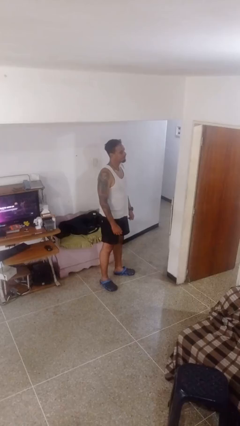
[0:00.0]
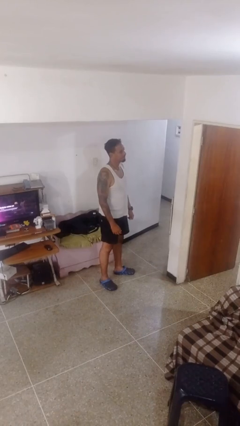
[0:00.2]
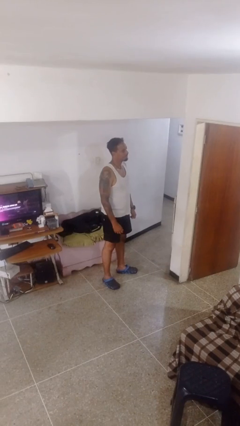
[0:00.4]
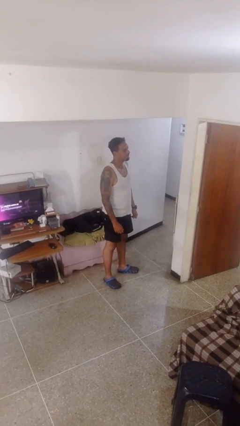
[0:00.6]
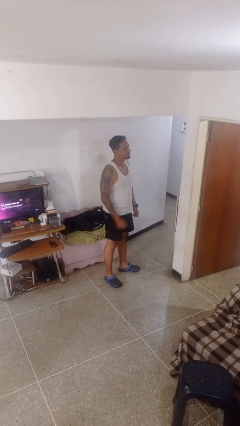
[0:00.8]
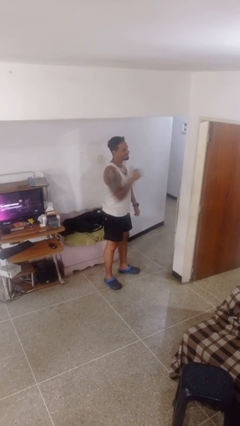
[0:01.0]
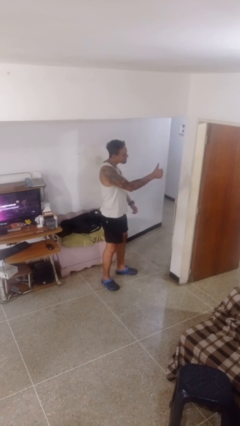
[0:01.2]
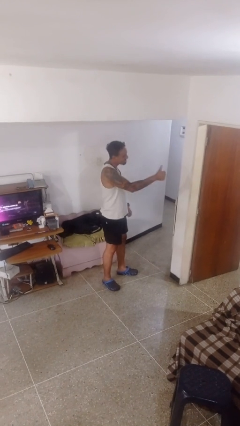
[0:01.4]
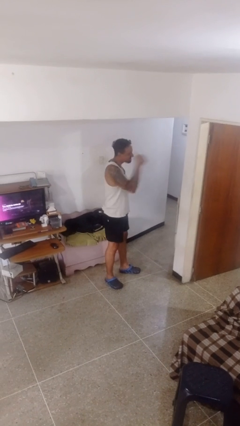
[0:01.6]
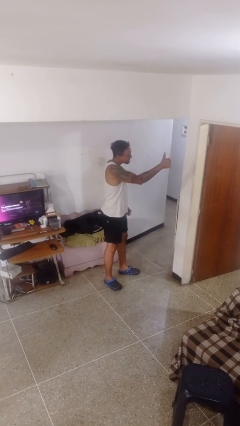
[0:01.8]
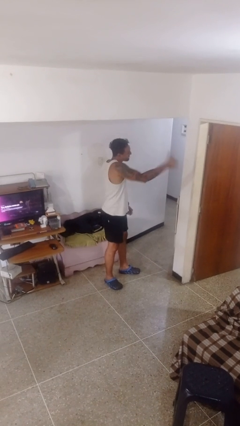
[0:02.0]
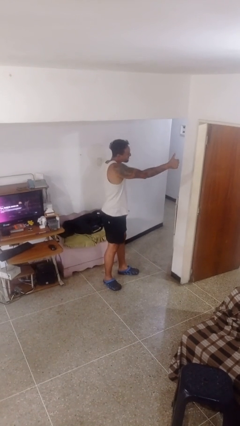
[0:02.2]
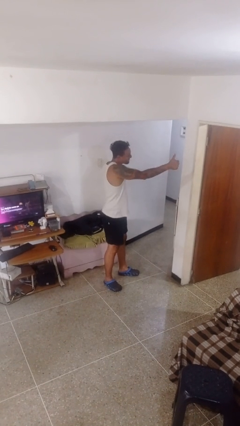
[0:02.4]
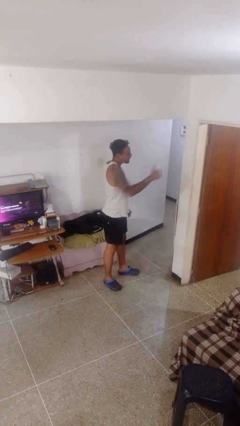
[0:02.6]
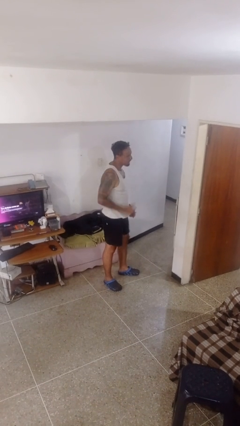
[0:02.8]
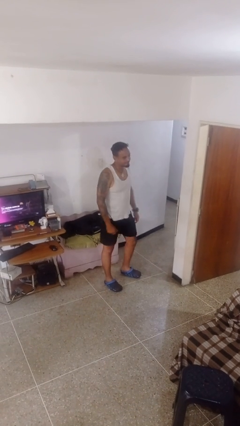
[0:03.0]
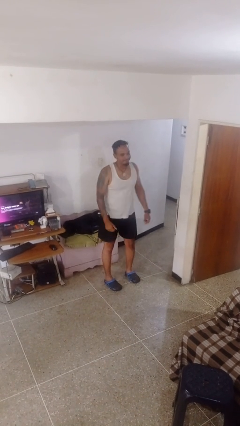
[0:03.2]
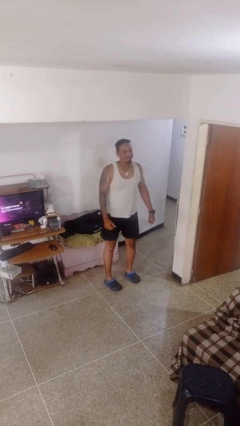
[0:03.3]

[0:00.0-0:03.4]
person gestures thumbs up

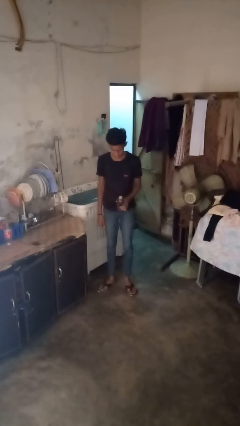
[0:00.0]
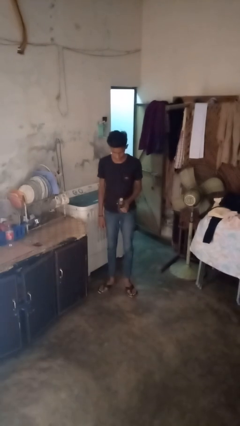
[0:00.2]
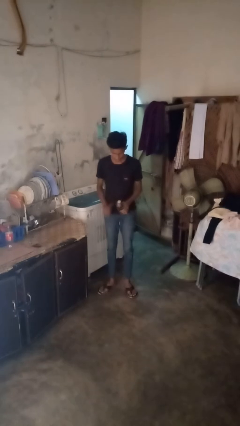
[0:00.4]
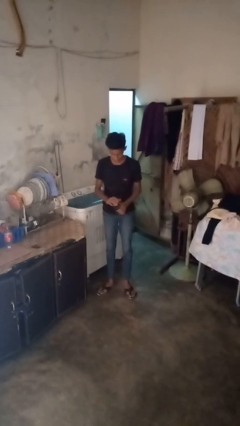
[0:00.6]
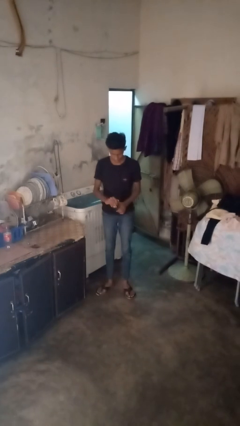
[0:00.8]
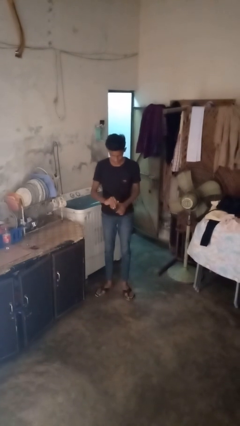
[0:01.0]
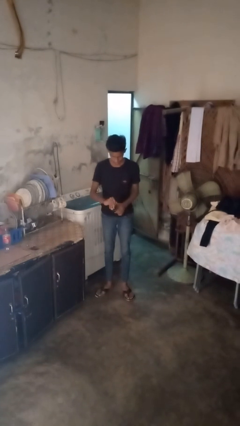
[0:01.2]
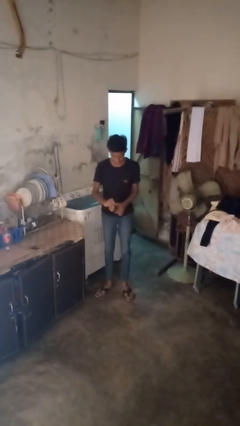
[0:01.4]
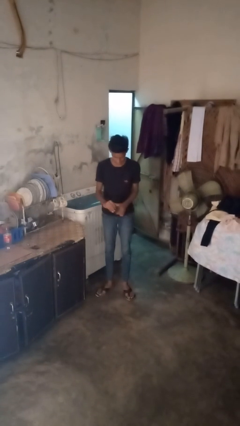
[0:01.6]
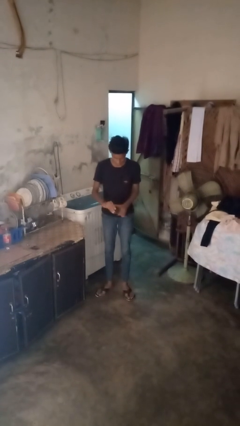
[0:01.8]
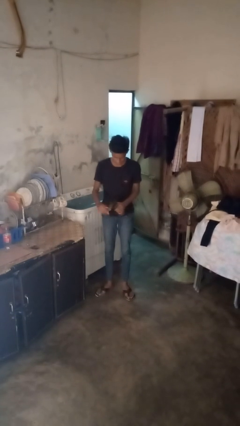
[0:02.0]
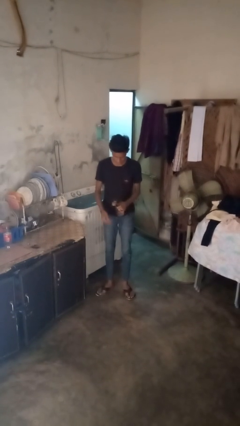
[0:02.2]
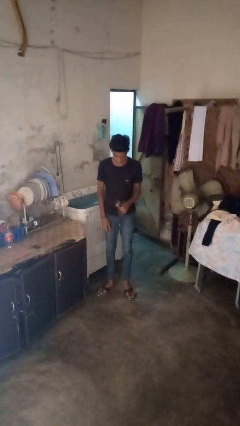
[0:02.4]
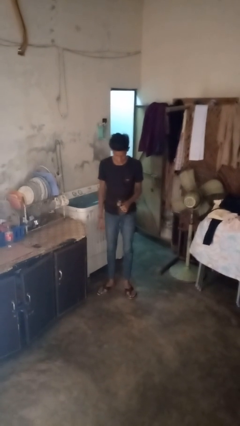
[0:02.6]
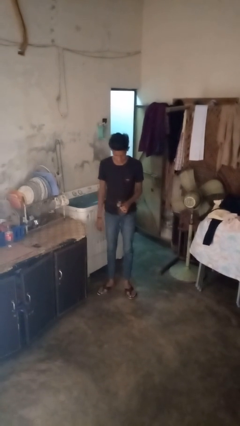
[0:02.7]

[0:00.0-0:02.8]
person opens can with can opener

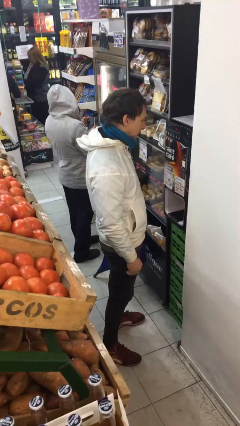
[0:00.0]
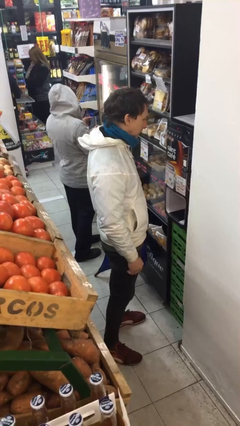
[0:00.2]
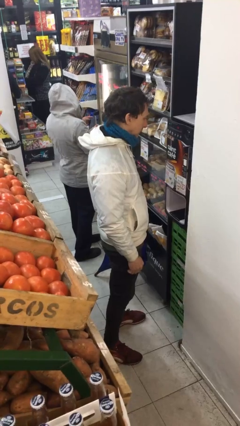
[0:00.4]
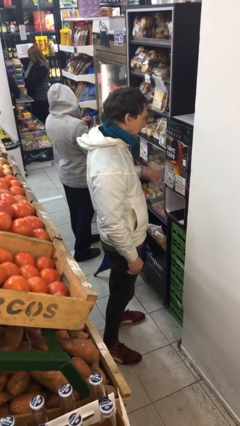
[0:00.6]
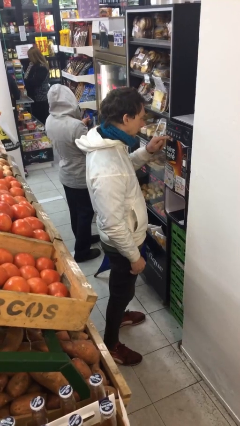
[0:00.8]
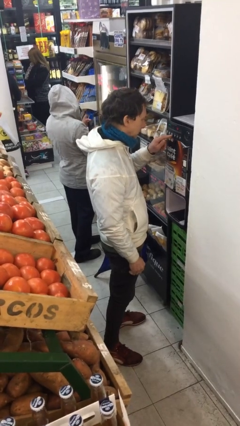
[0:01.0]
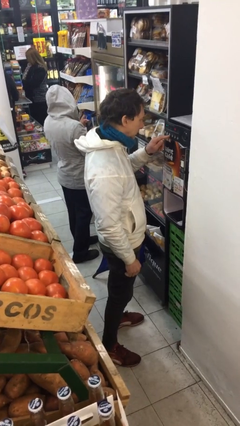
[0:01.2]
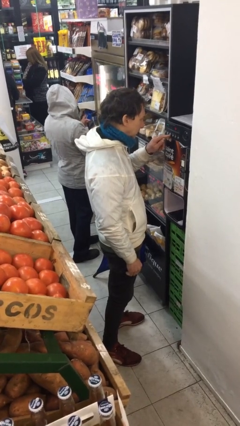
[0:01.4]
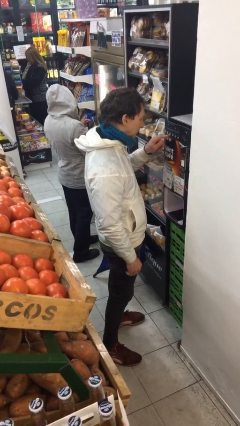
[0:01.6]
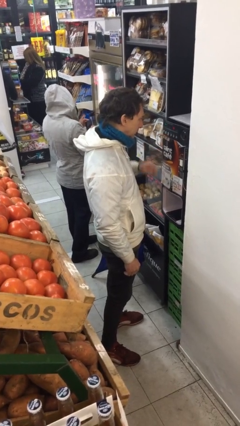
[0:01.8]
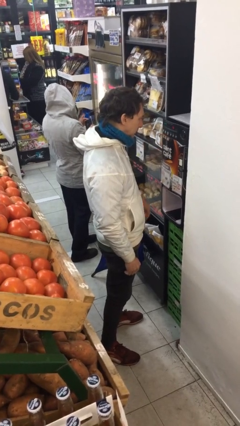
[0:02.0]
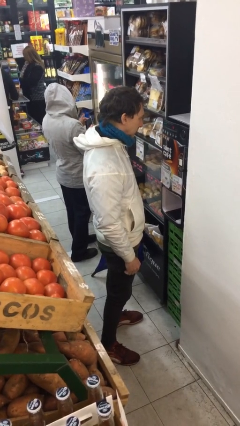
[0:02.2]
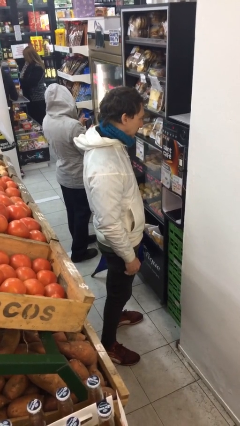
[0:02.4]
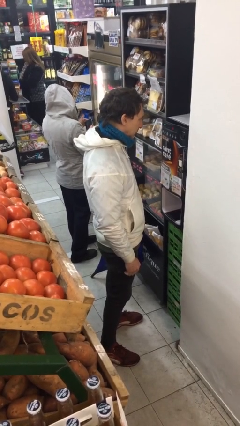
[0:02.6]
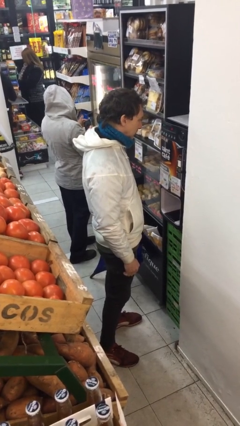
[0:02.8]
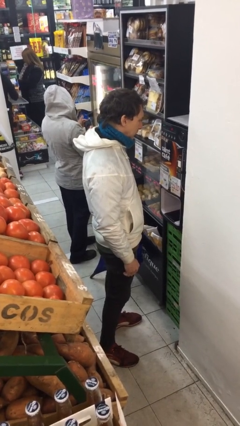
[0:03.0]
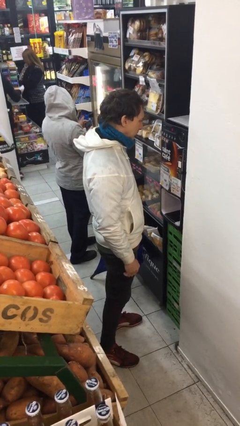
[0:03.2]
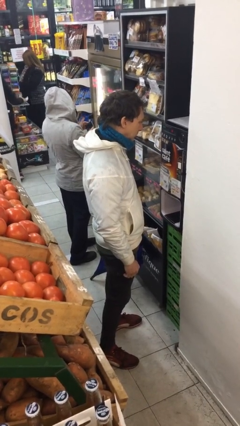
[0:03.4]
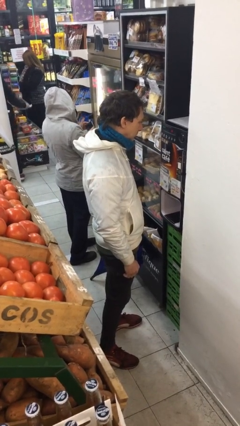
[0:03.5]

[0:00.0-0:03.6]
person purchases from machine

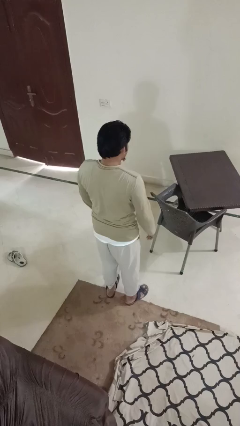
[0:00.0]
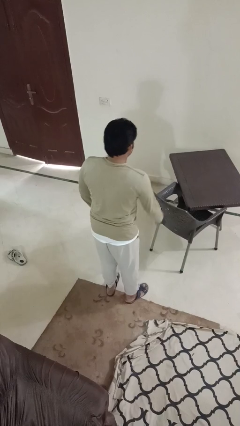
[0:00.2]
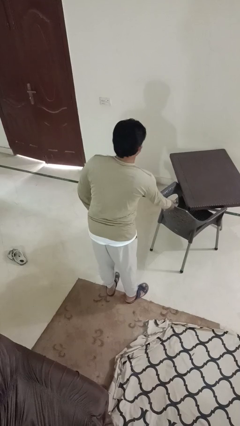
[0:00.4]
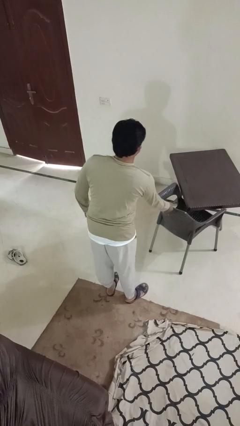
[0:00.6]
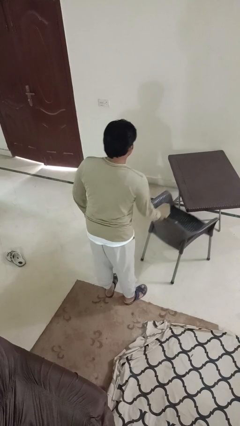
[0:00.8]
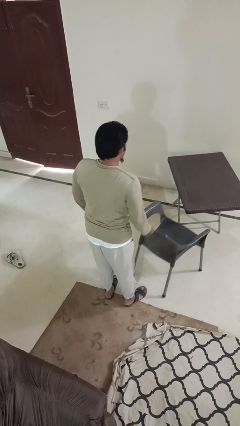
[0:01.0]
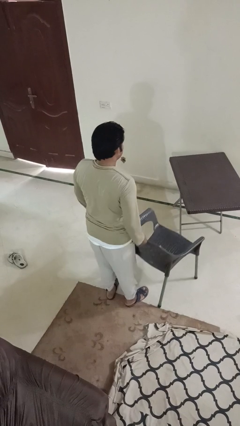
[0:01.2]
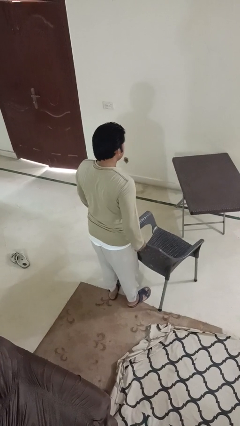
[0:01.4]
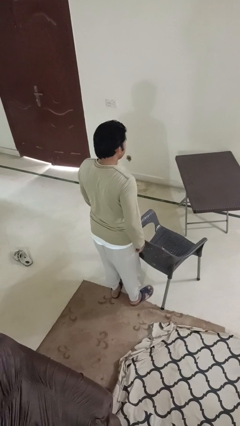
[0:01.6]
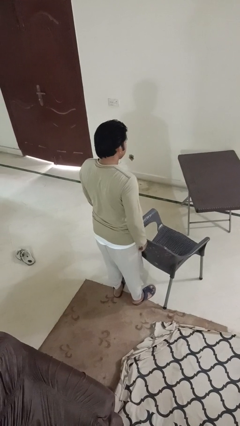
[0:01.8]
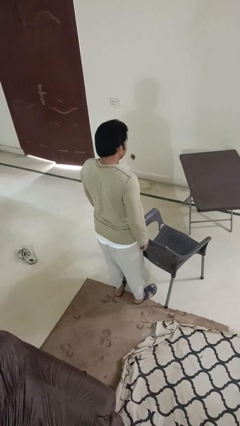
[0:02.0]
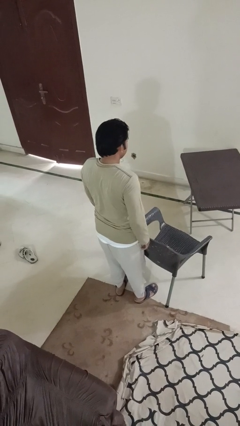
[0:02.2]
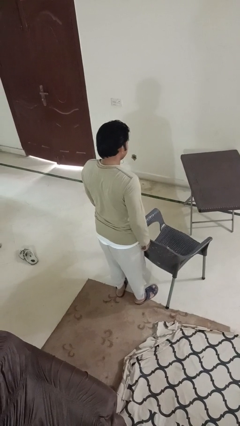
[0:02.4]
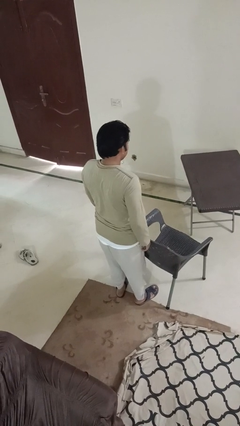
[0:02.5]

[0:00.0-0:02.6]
person pulls out chair

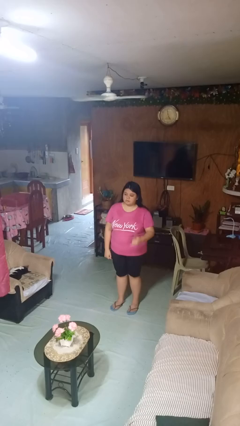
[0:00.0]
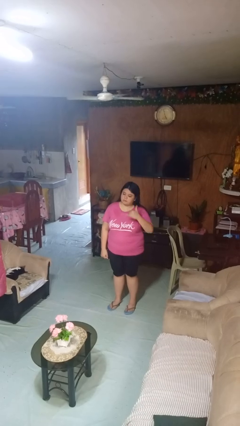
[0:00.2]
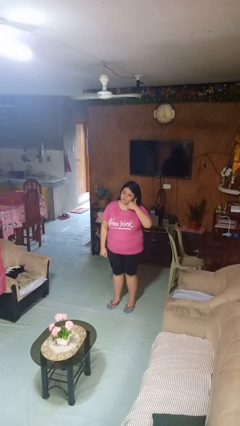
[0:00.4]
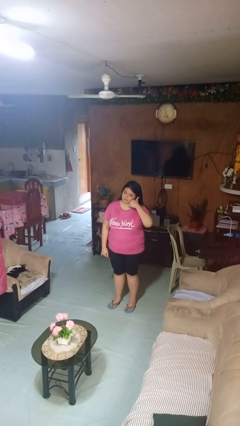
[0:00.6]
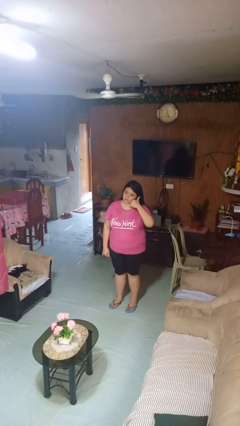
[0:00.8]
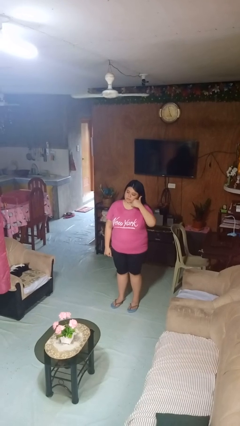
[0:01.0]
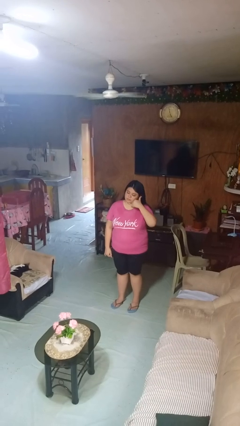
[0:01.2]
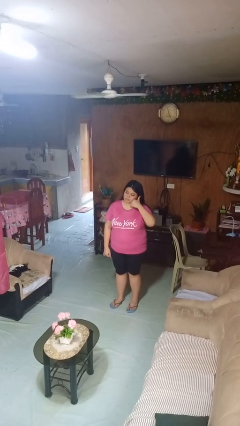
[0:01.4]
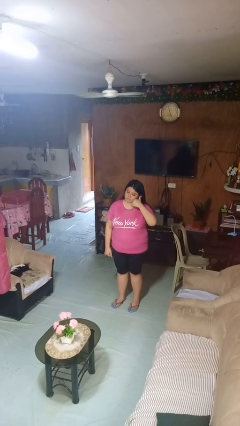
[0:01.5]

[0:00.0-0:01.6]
person gestures call me

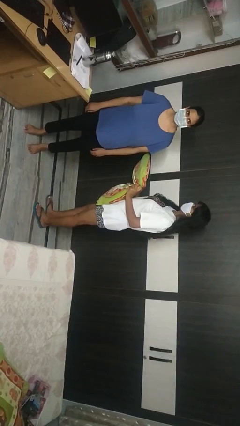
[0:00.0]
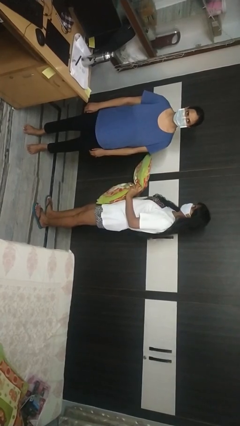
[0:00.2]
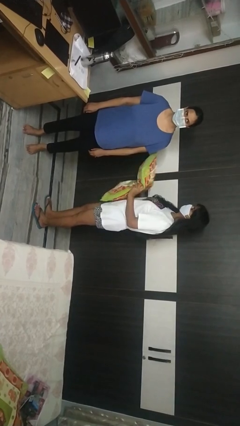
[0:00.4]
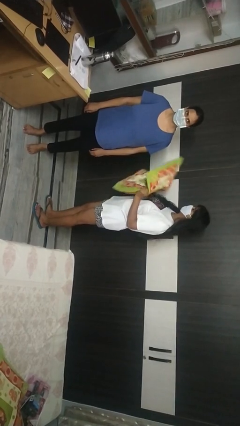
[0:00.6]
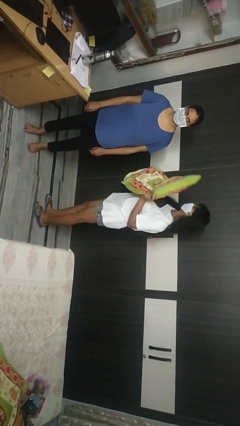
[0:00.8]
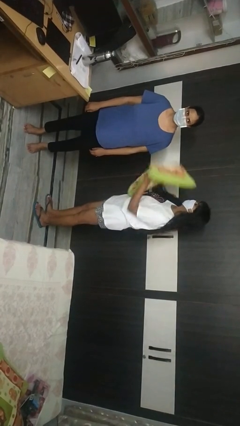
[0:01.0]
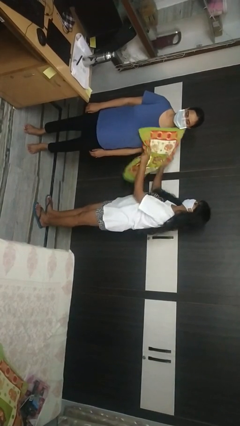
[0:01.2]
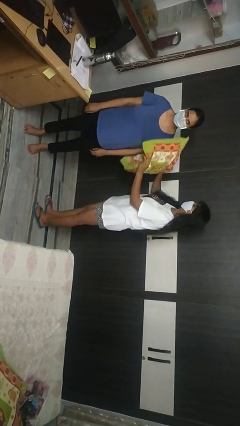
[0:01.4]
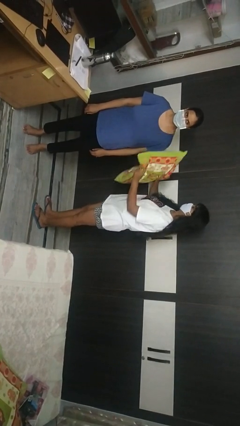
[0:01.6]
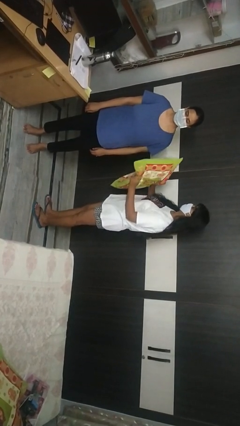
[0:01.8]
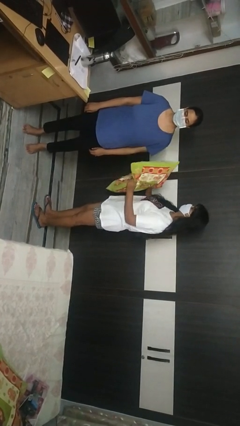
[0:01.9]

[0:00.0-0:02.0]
person hits person with pillow

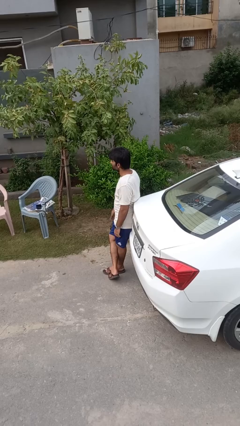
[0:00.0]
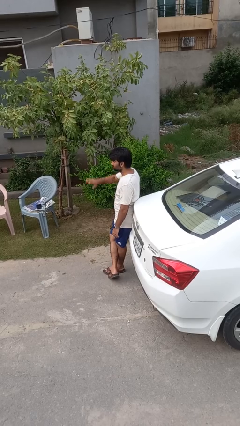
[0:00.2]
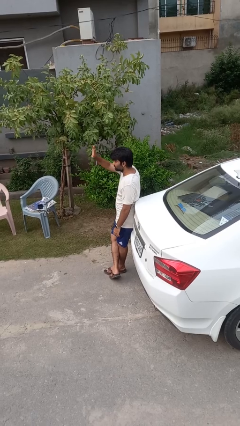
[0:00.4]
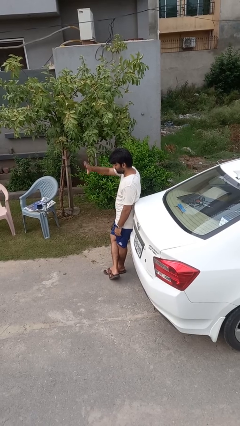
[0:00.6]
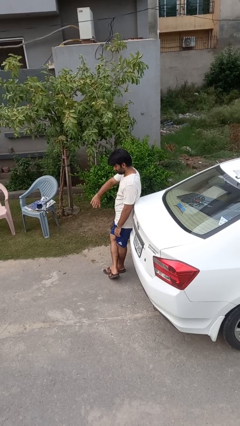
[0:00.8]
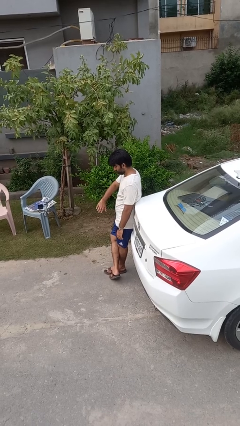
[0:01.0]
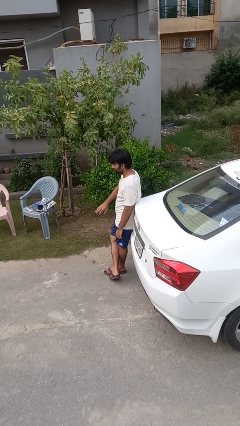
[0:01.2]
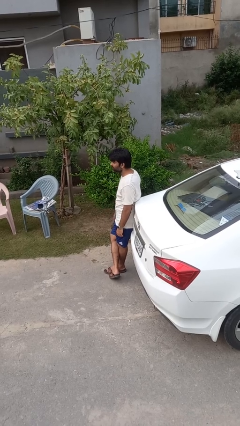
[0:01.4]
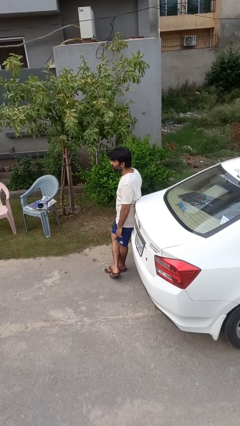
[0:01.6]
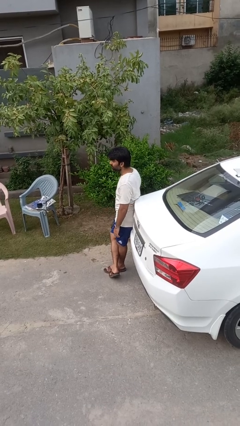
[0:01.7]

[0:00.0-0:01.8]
person gestures swipe down
